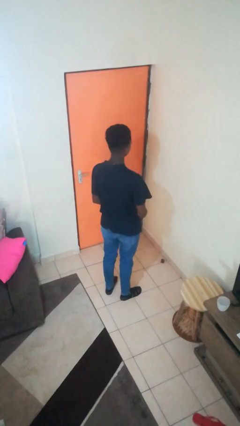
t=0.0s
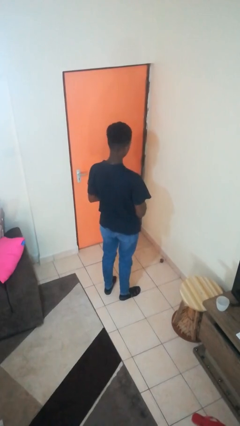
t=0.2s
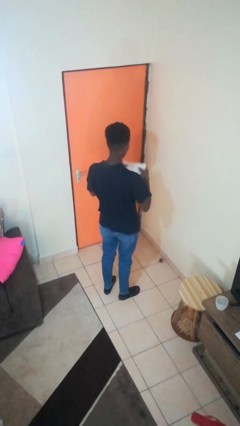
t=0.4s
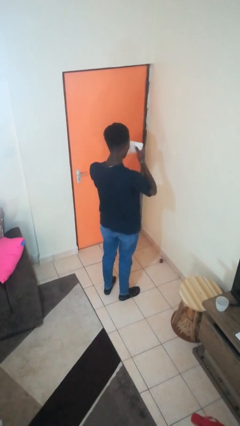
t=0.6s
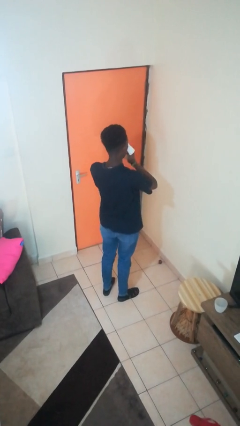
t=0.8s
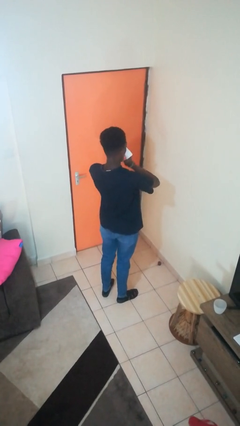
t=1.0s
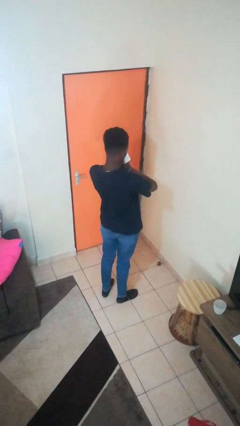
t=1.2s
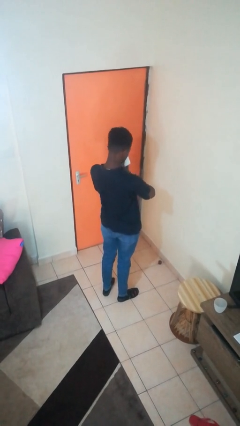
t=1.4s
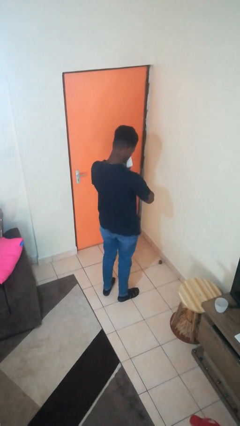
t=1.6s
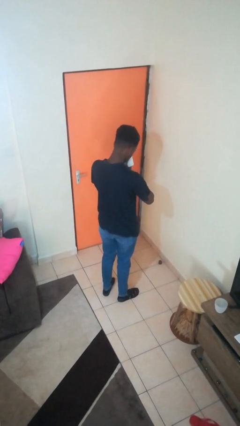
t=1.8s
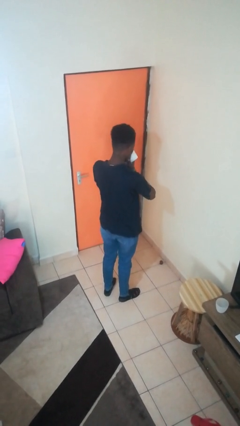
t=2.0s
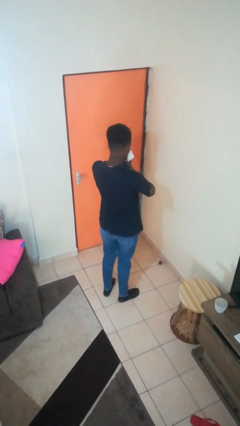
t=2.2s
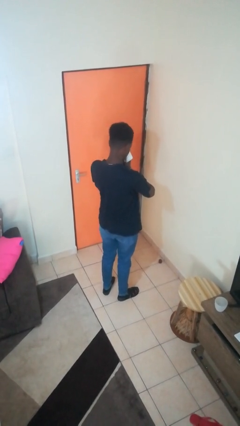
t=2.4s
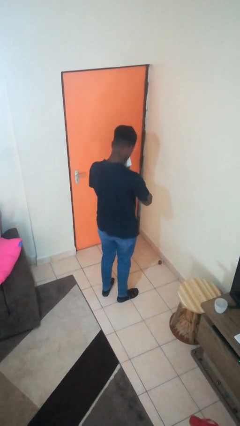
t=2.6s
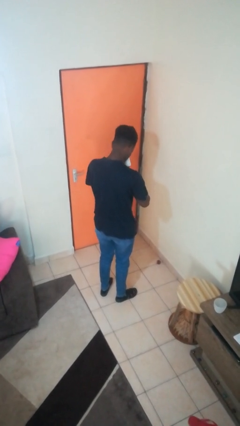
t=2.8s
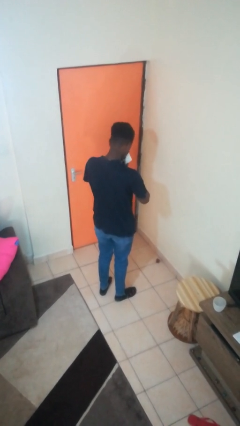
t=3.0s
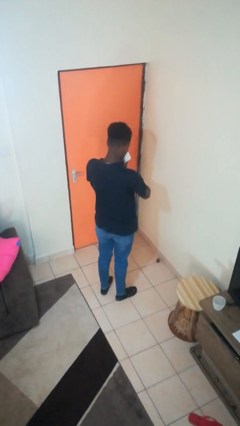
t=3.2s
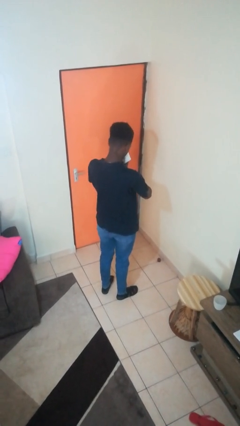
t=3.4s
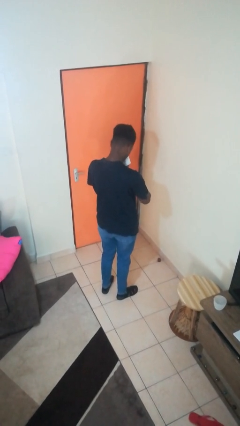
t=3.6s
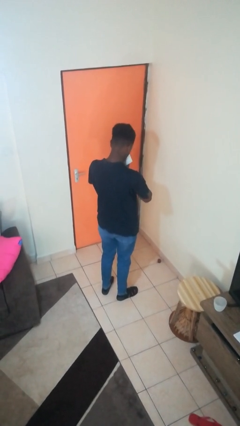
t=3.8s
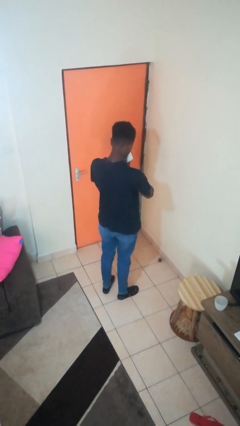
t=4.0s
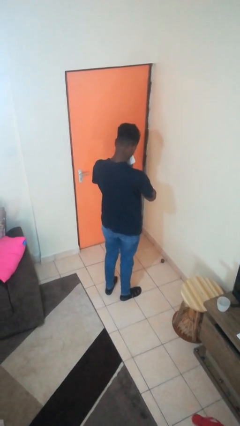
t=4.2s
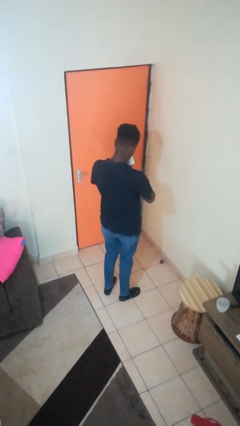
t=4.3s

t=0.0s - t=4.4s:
person blows nose

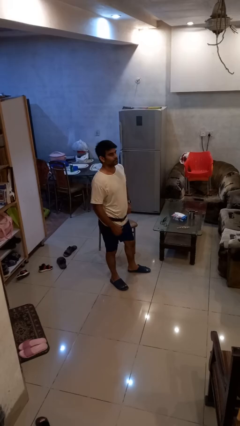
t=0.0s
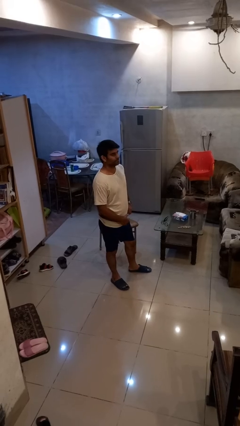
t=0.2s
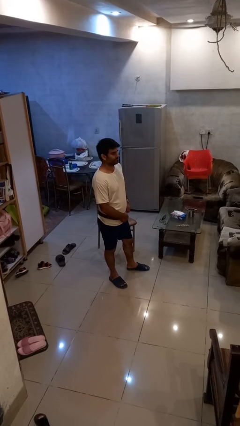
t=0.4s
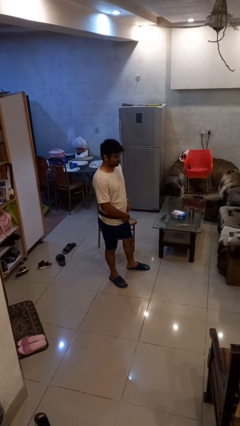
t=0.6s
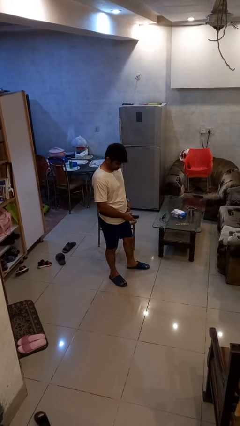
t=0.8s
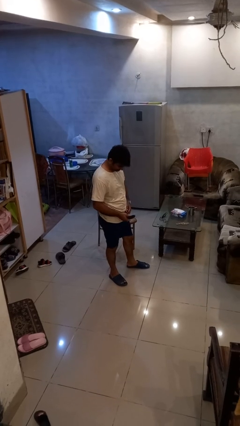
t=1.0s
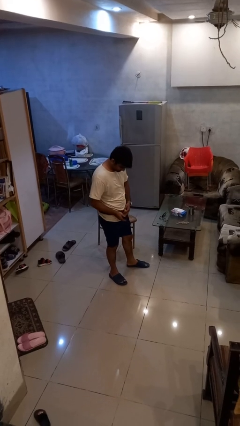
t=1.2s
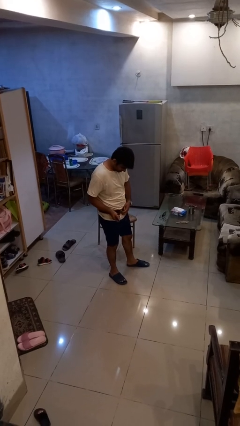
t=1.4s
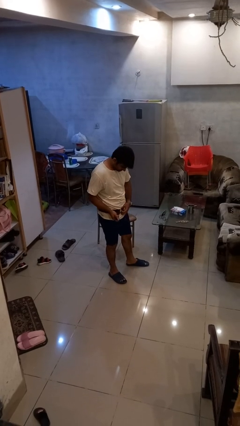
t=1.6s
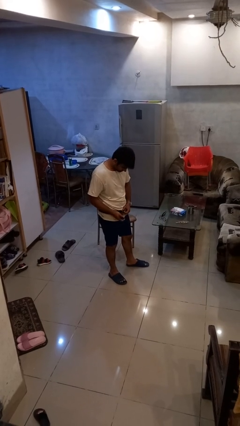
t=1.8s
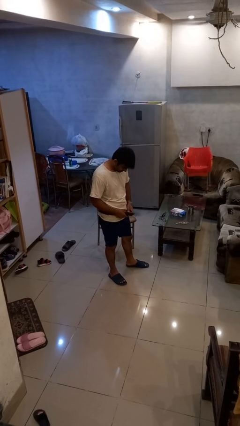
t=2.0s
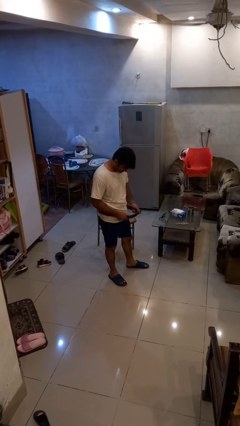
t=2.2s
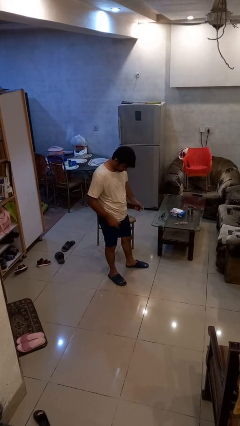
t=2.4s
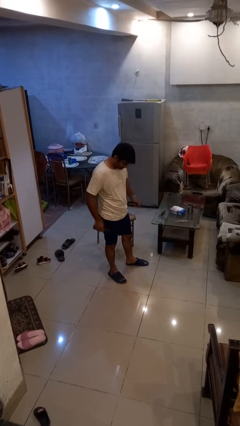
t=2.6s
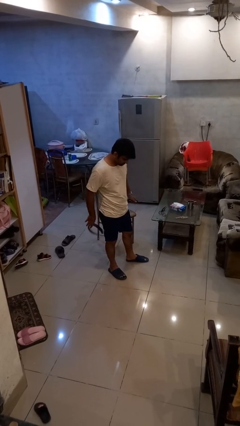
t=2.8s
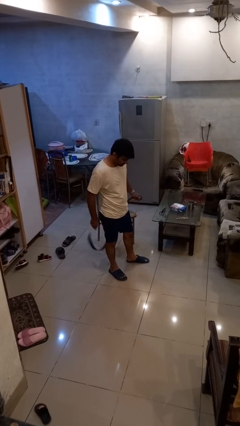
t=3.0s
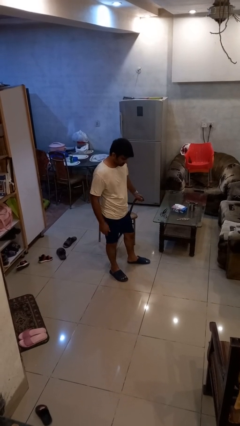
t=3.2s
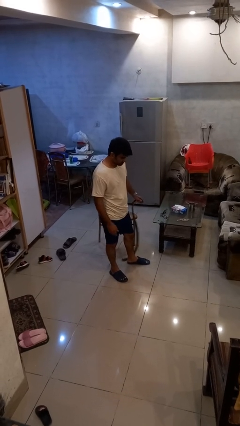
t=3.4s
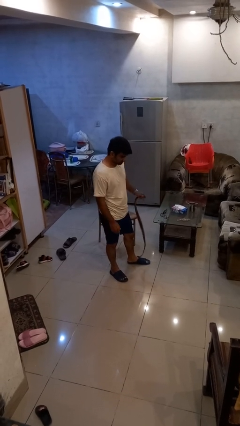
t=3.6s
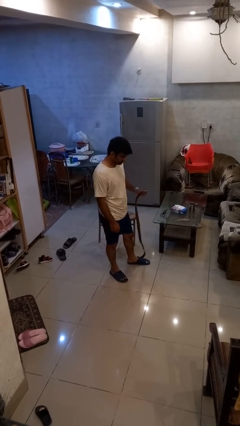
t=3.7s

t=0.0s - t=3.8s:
person takes off belt

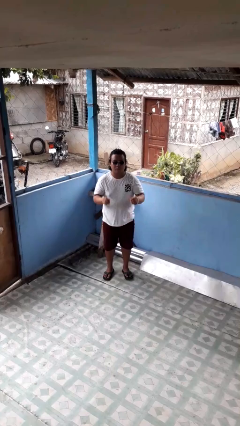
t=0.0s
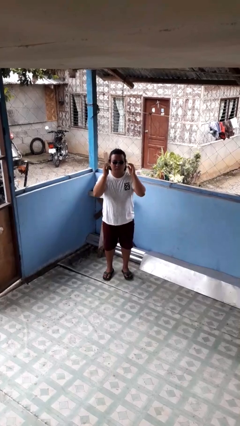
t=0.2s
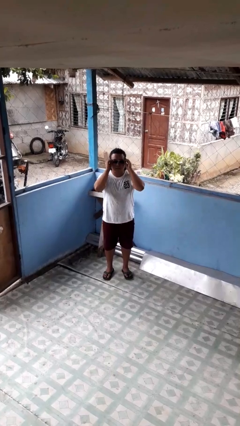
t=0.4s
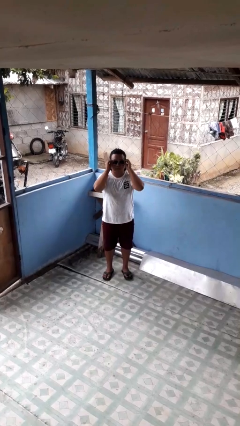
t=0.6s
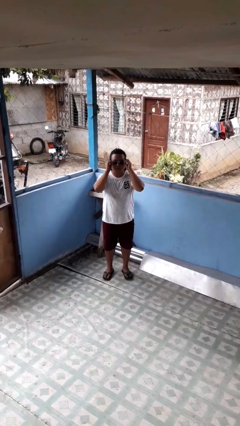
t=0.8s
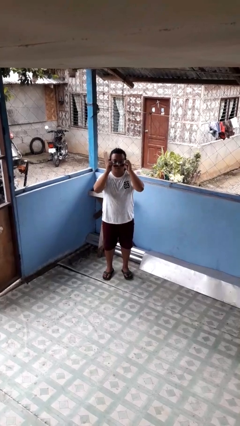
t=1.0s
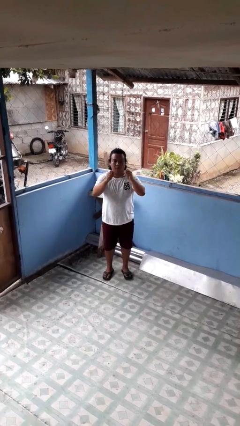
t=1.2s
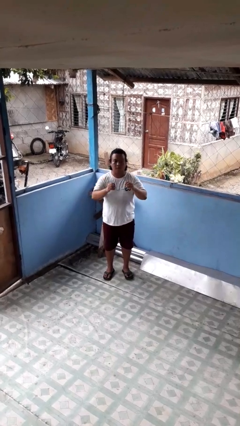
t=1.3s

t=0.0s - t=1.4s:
person takes off sunglasses

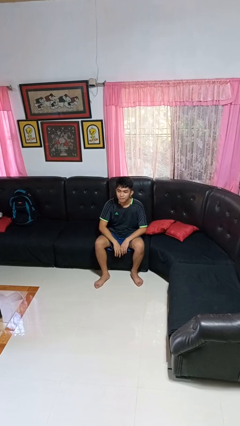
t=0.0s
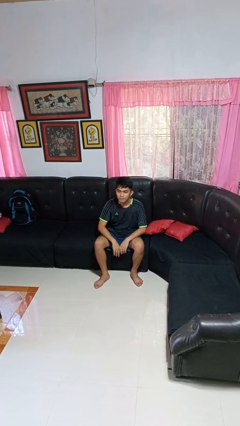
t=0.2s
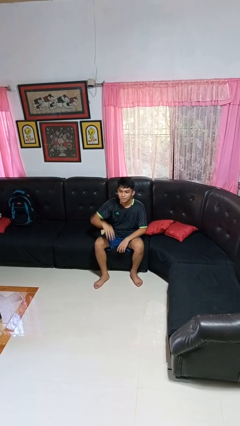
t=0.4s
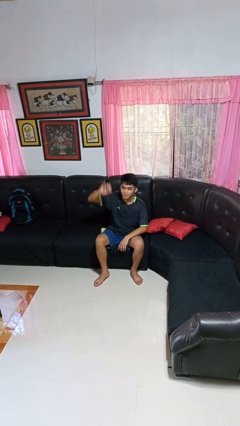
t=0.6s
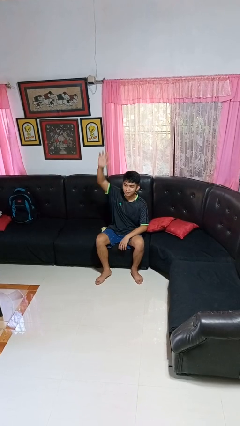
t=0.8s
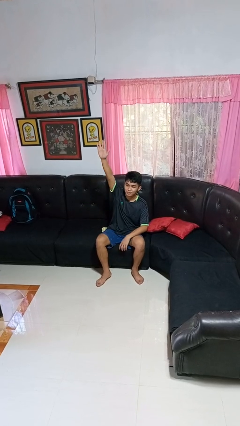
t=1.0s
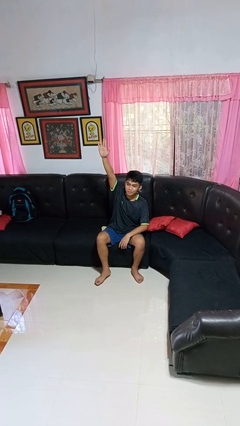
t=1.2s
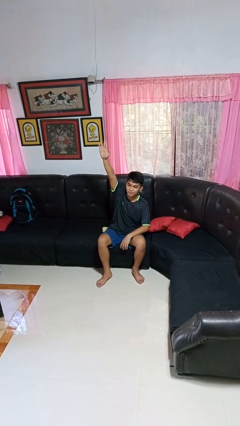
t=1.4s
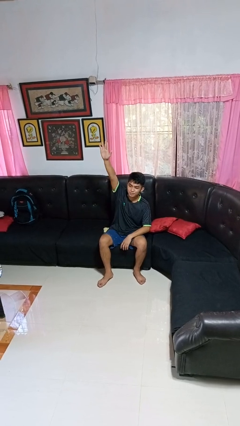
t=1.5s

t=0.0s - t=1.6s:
person gestures raise hand

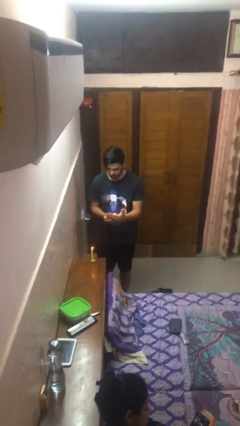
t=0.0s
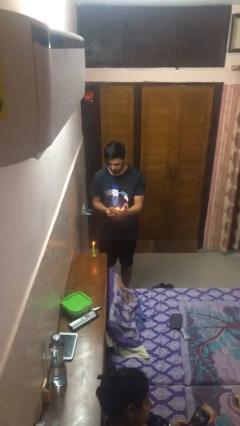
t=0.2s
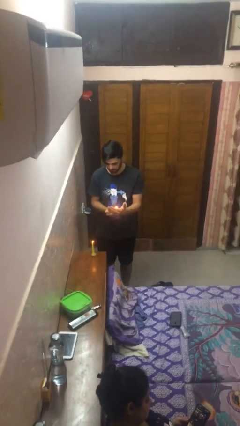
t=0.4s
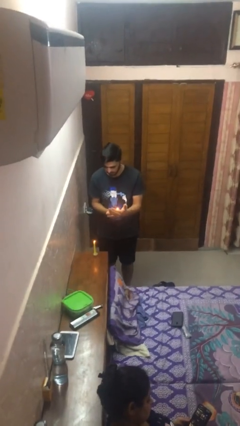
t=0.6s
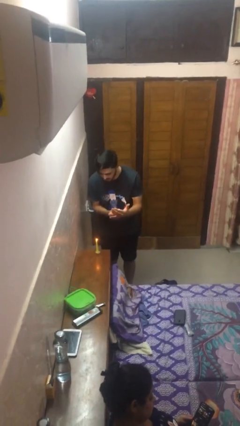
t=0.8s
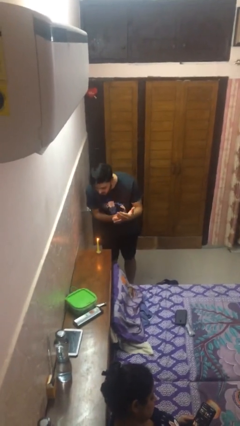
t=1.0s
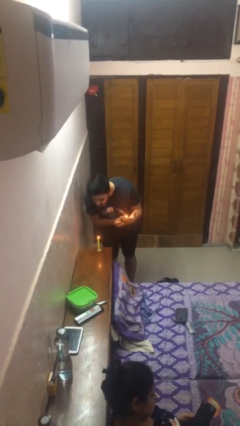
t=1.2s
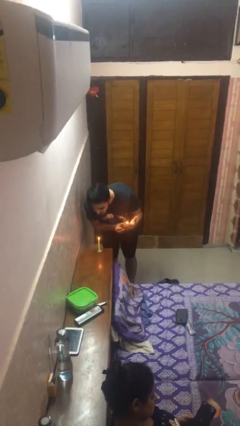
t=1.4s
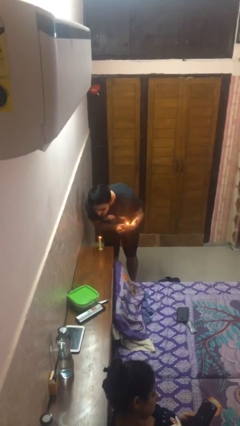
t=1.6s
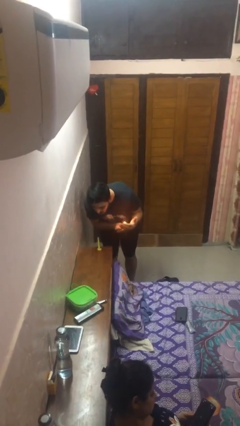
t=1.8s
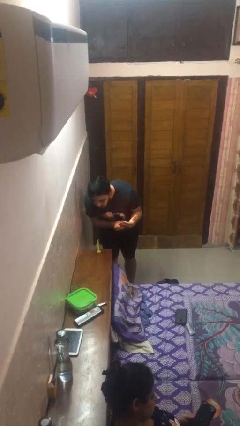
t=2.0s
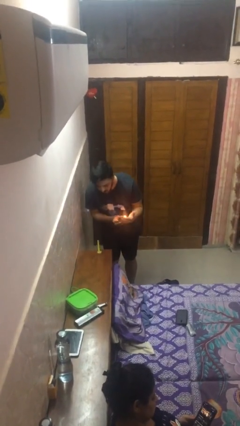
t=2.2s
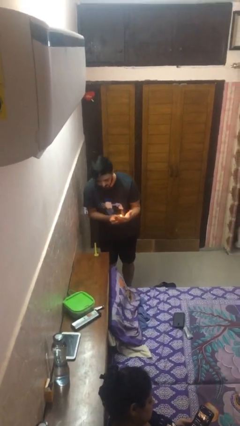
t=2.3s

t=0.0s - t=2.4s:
person extinguishes candle

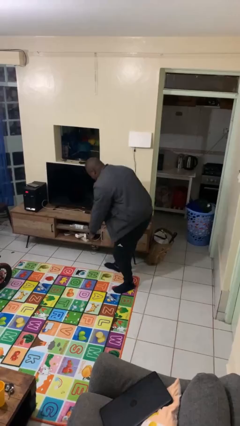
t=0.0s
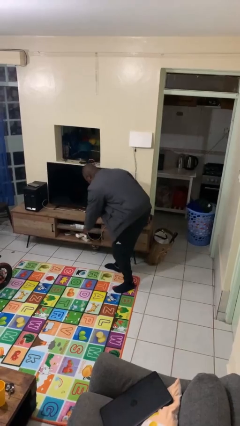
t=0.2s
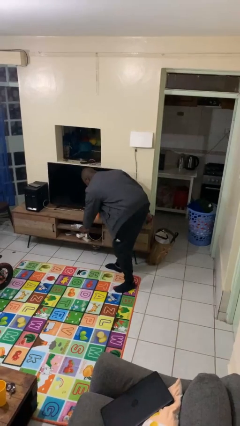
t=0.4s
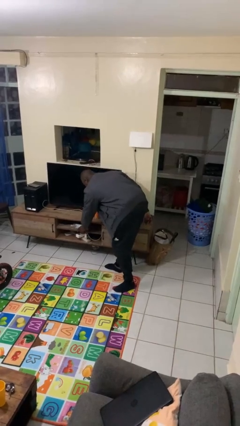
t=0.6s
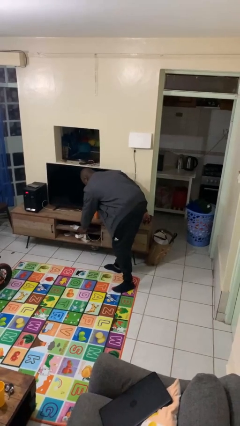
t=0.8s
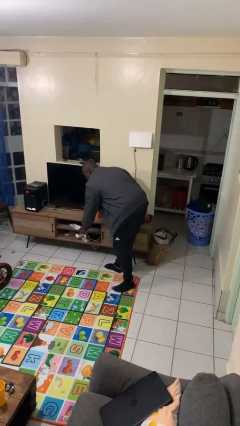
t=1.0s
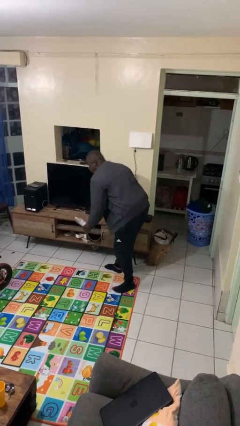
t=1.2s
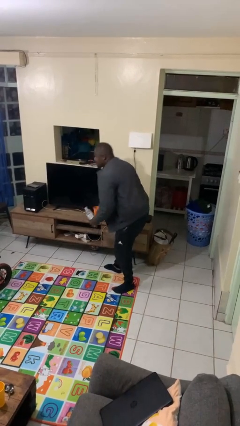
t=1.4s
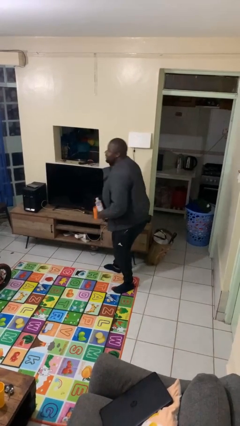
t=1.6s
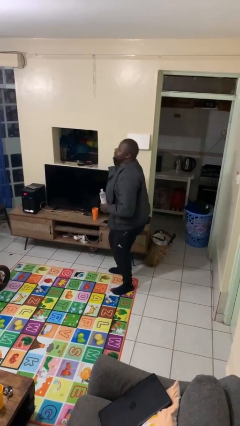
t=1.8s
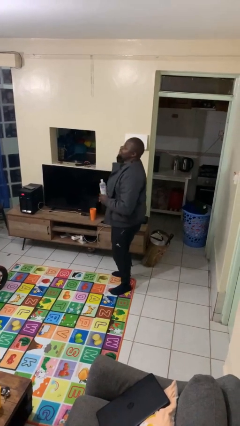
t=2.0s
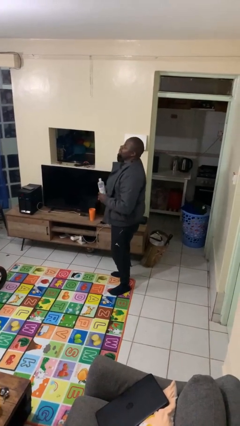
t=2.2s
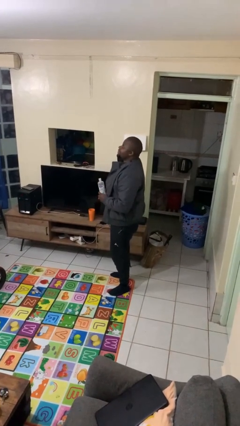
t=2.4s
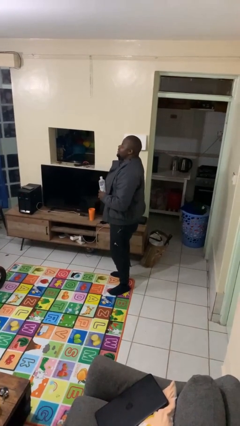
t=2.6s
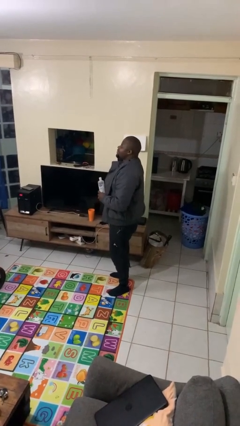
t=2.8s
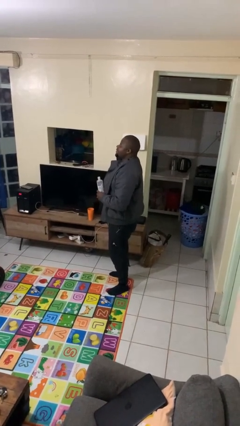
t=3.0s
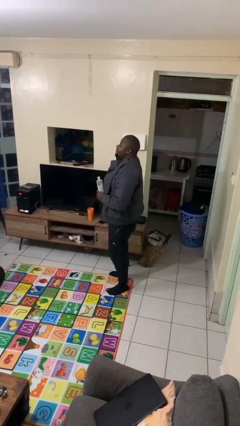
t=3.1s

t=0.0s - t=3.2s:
person picks up object from cabinet

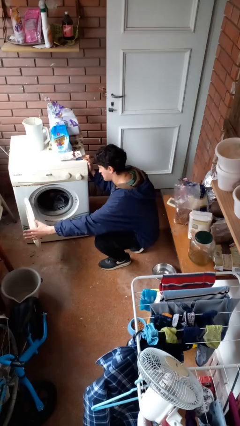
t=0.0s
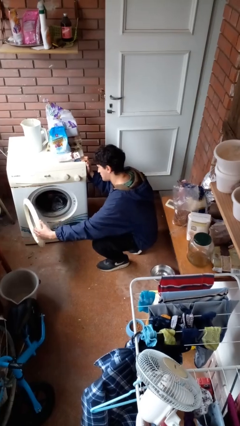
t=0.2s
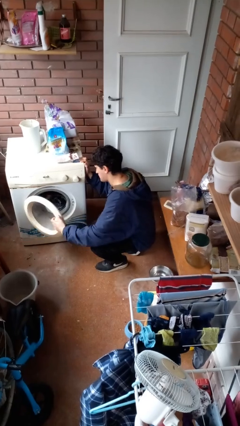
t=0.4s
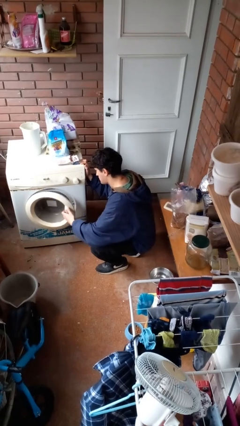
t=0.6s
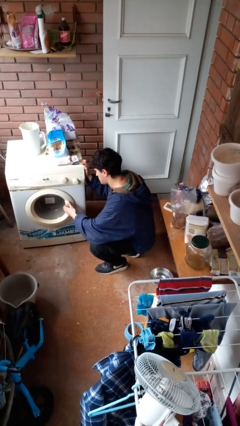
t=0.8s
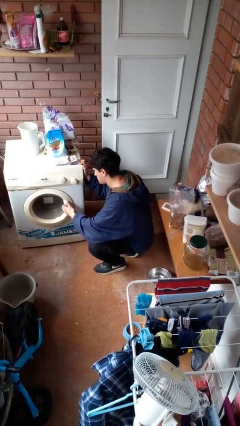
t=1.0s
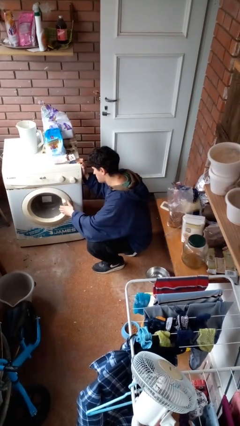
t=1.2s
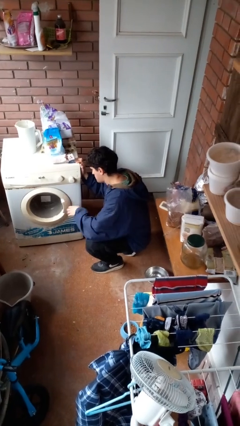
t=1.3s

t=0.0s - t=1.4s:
person closes clothes washer
